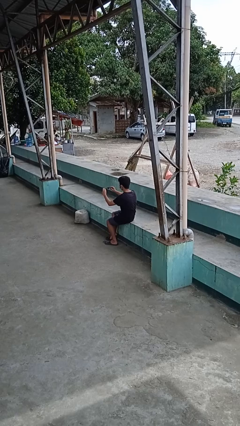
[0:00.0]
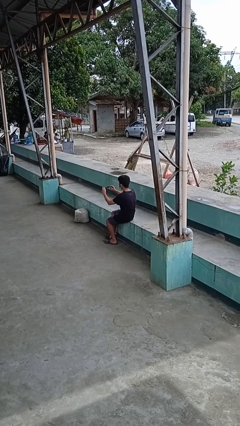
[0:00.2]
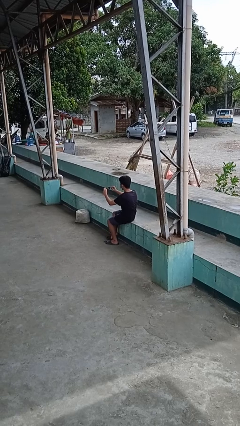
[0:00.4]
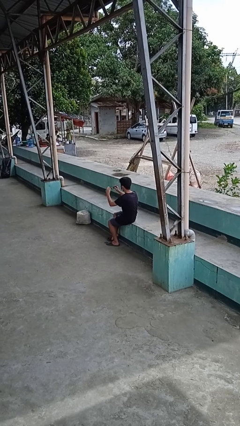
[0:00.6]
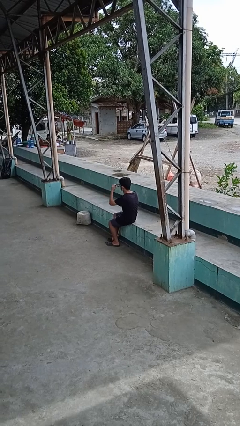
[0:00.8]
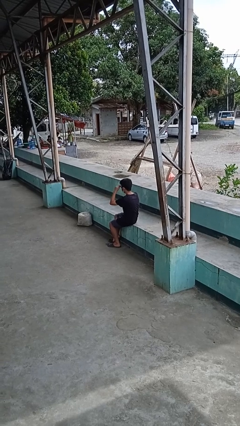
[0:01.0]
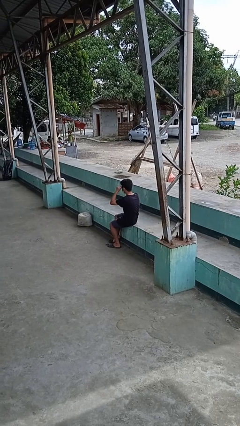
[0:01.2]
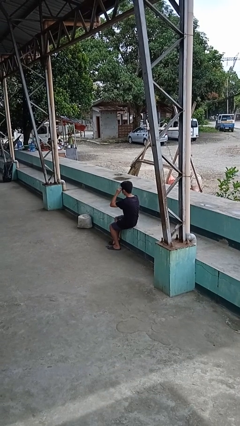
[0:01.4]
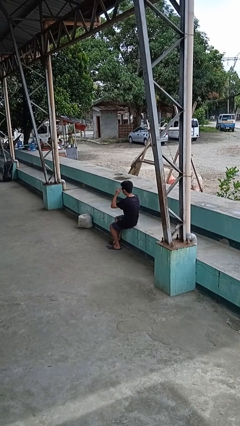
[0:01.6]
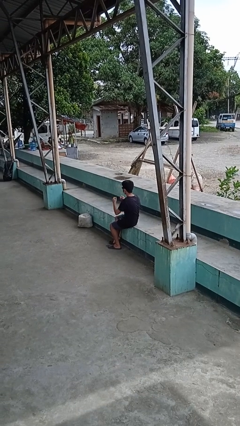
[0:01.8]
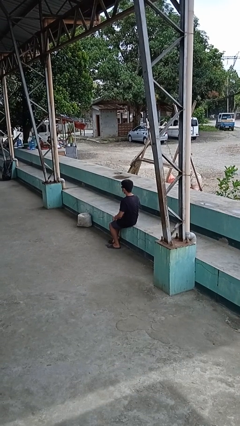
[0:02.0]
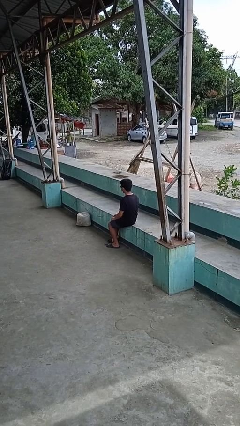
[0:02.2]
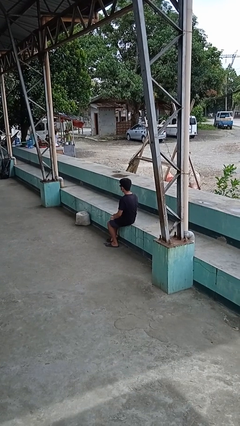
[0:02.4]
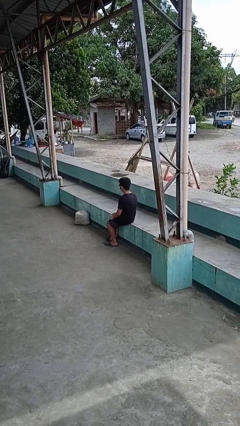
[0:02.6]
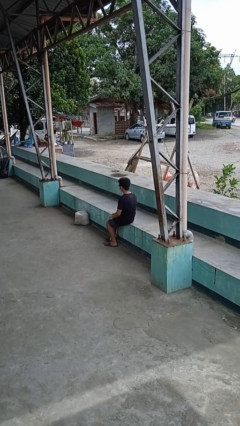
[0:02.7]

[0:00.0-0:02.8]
person puts on sunglasses

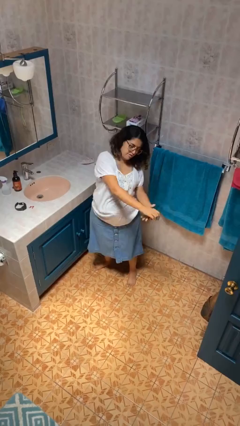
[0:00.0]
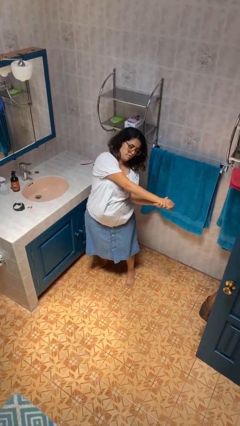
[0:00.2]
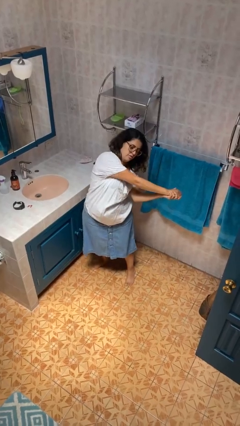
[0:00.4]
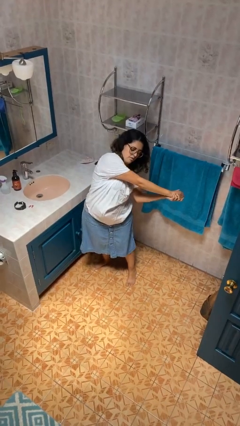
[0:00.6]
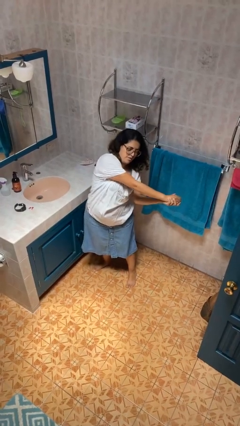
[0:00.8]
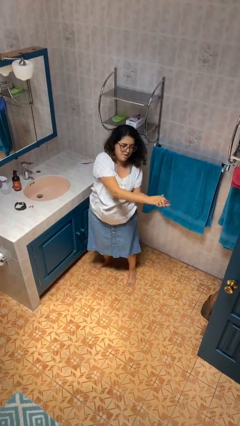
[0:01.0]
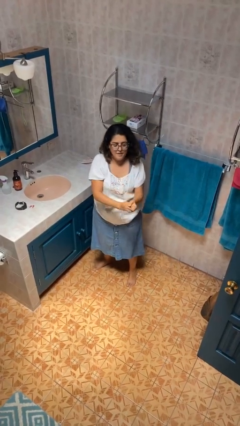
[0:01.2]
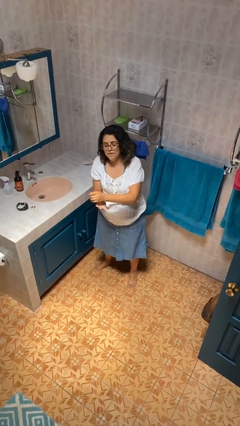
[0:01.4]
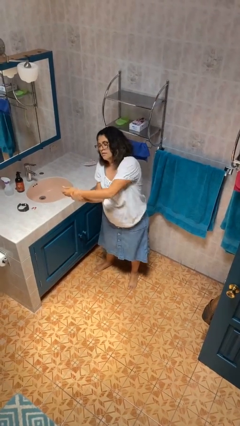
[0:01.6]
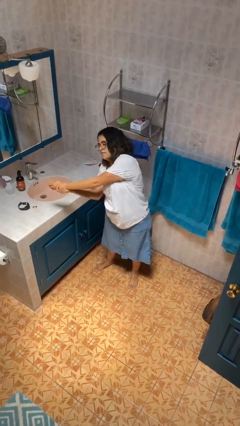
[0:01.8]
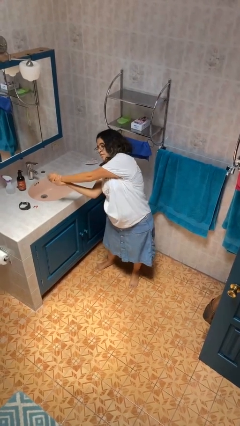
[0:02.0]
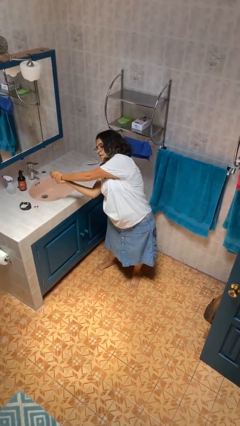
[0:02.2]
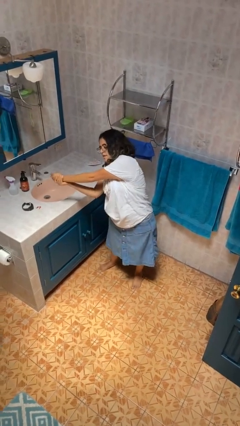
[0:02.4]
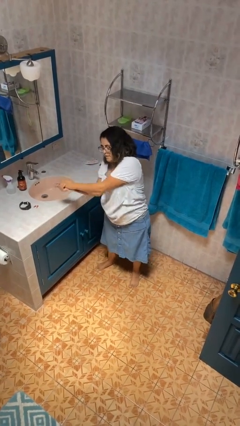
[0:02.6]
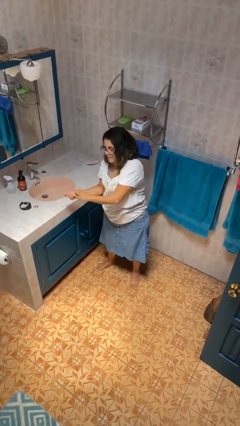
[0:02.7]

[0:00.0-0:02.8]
person stretches arms to side

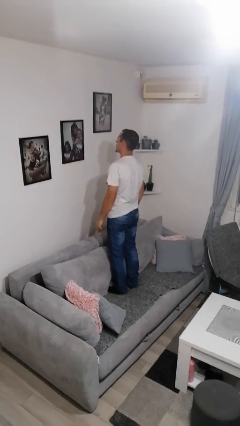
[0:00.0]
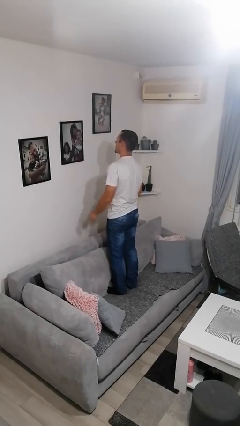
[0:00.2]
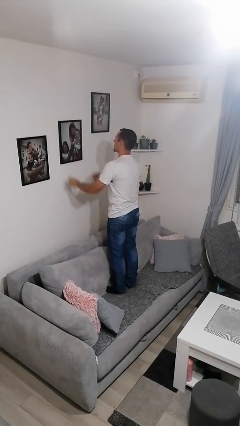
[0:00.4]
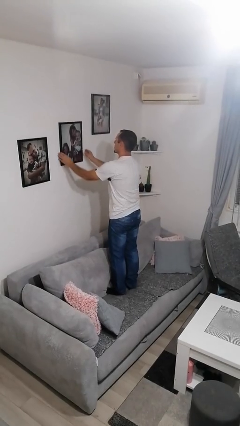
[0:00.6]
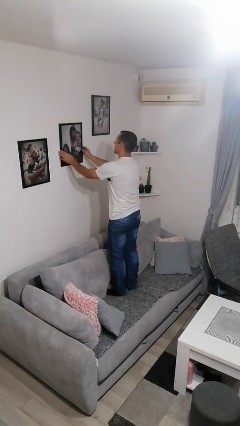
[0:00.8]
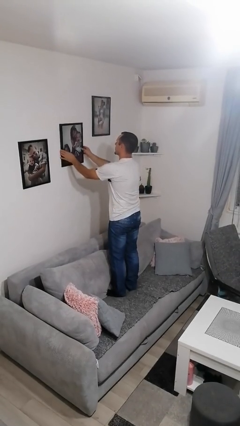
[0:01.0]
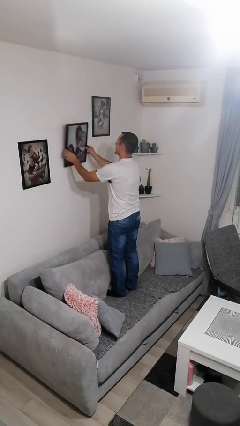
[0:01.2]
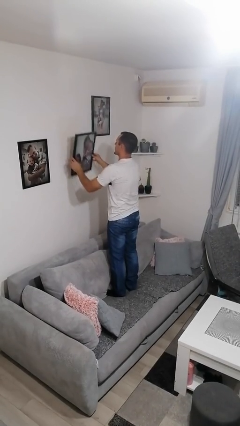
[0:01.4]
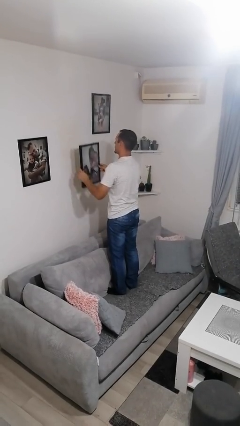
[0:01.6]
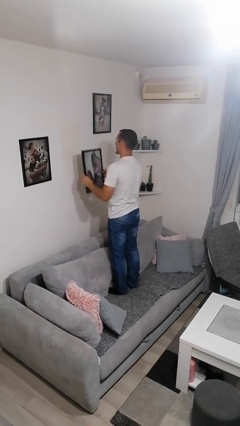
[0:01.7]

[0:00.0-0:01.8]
person takes down picture frame

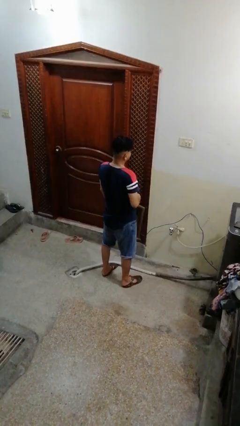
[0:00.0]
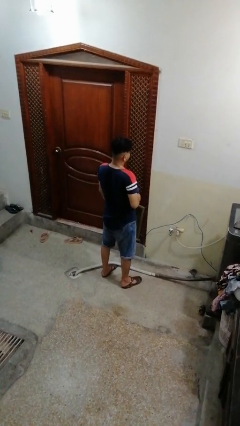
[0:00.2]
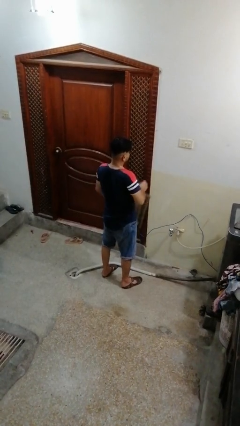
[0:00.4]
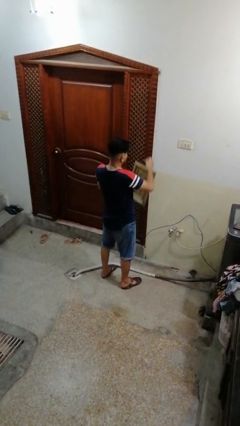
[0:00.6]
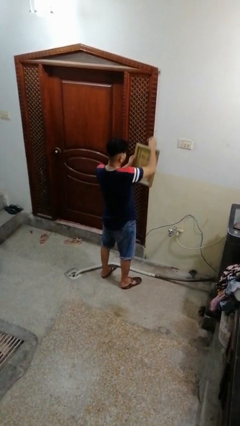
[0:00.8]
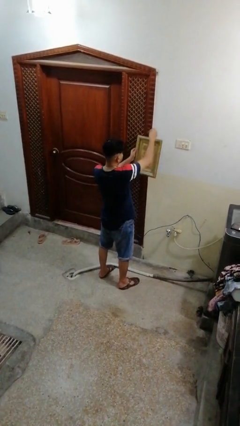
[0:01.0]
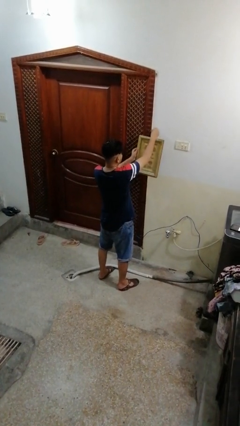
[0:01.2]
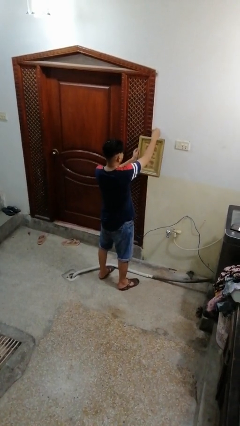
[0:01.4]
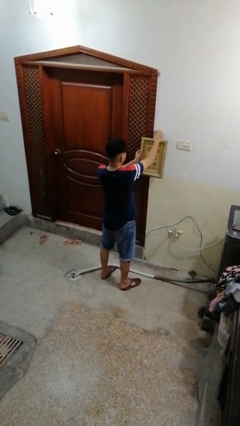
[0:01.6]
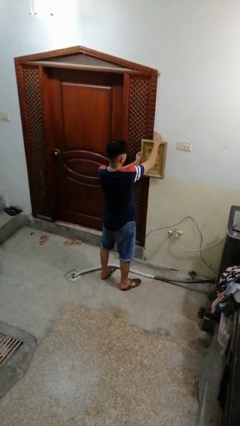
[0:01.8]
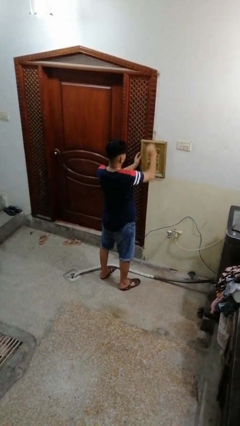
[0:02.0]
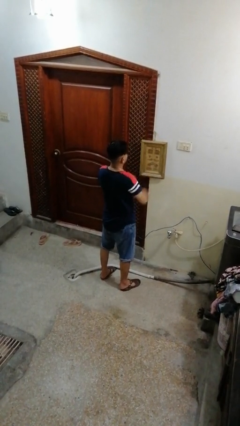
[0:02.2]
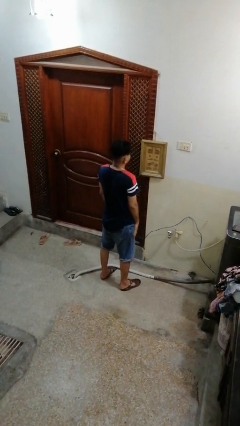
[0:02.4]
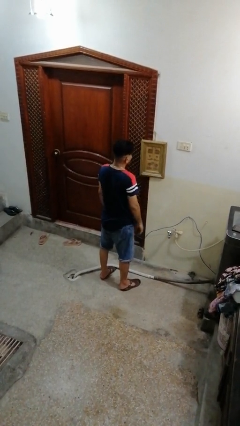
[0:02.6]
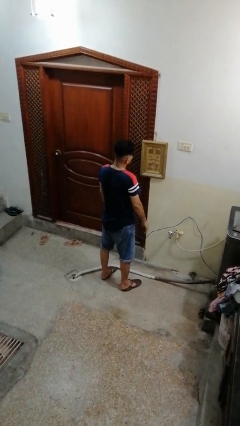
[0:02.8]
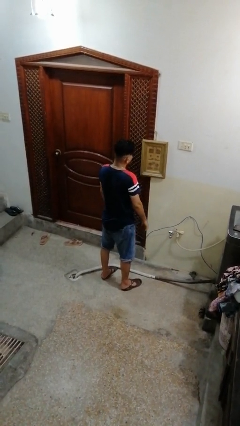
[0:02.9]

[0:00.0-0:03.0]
person puts up picture frame

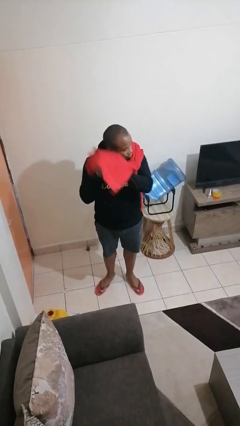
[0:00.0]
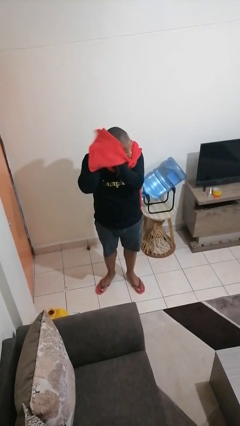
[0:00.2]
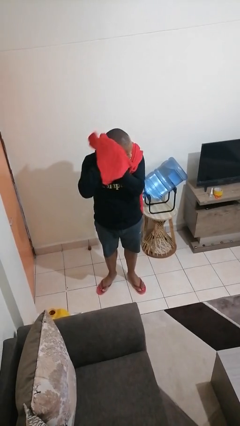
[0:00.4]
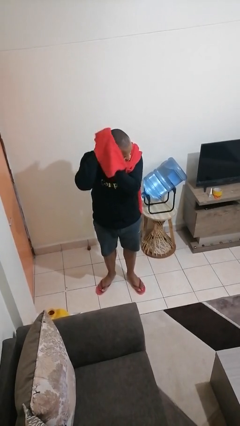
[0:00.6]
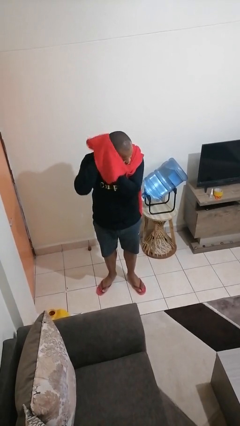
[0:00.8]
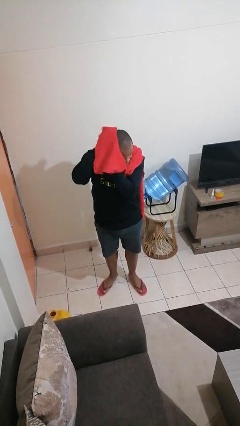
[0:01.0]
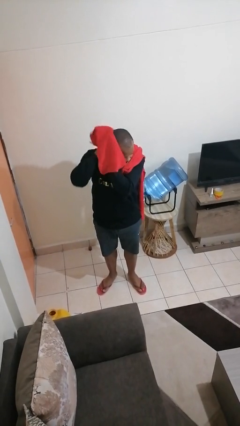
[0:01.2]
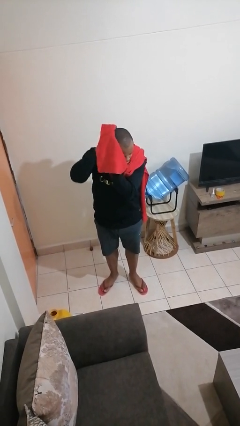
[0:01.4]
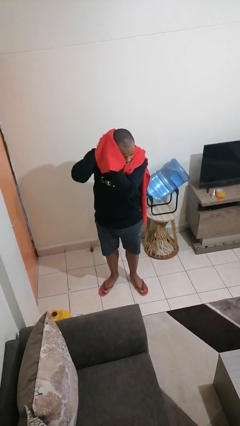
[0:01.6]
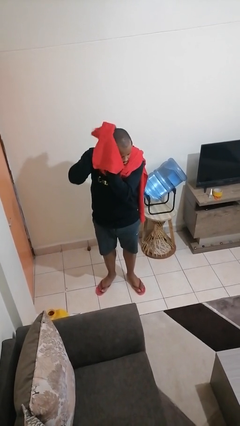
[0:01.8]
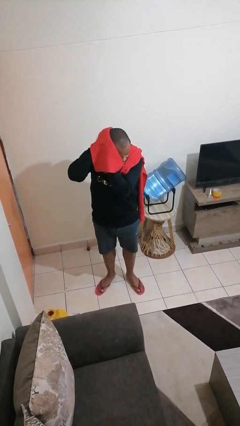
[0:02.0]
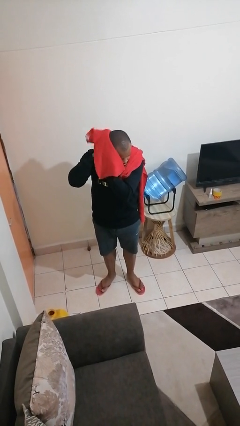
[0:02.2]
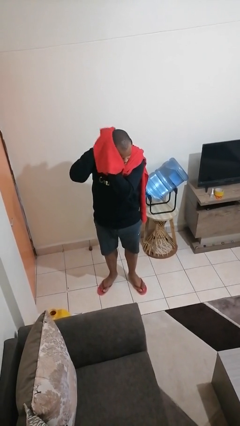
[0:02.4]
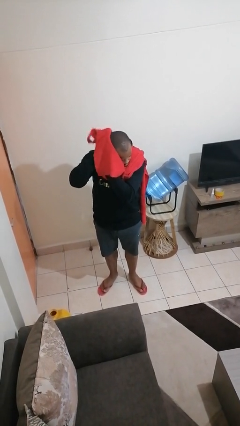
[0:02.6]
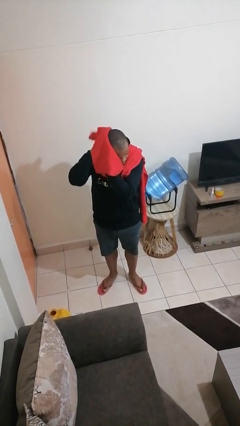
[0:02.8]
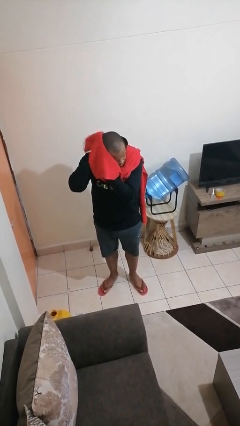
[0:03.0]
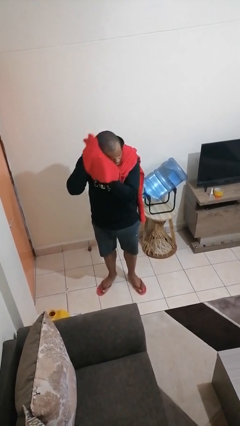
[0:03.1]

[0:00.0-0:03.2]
person dries hair with towel

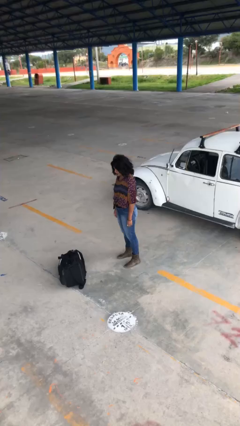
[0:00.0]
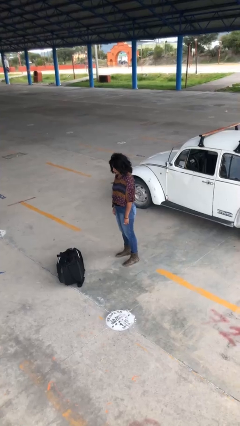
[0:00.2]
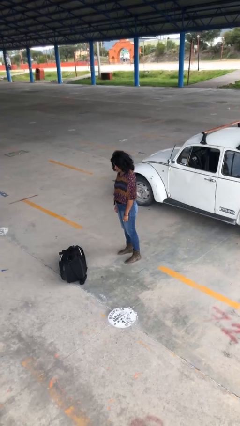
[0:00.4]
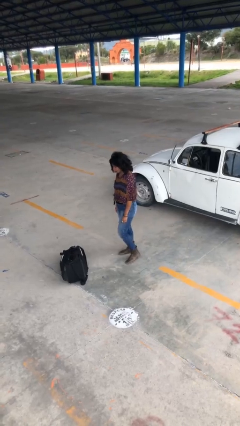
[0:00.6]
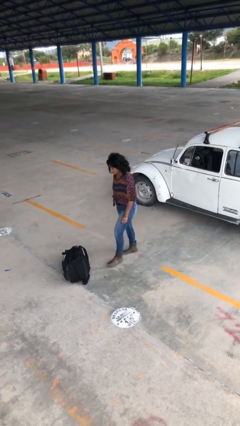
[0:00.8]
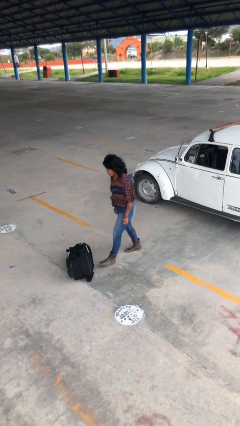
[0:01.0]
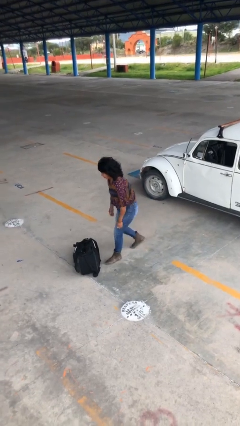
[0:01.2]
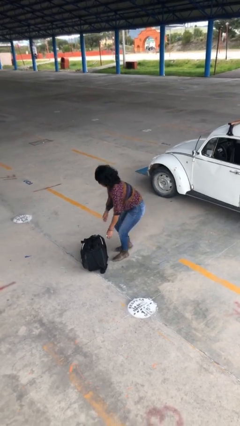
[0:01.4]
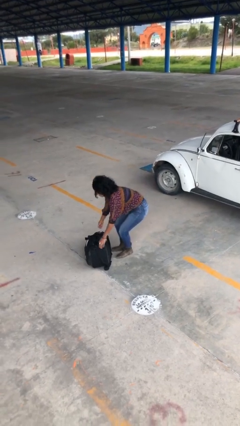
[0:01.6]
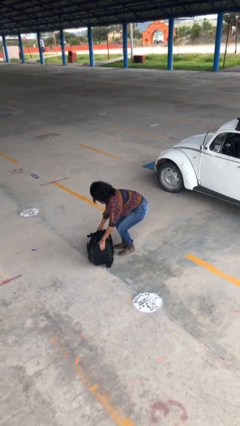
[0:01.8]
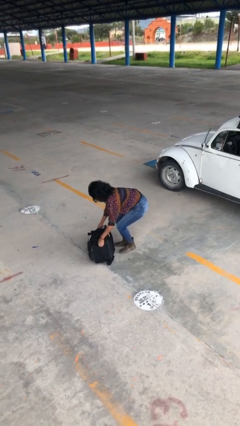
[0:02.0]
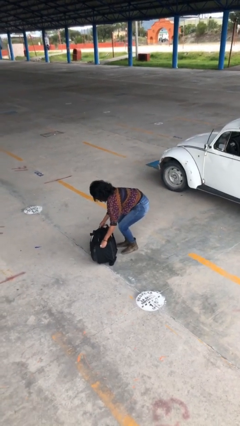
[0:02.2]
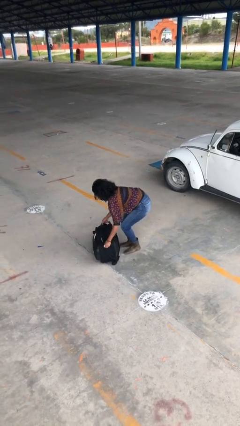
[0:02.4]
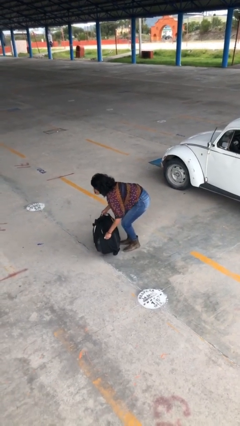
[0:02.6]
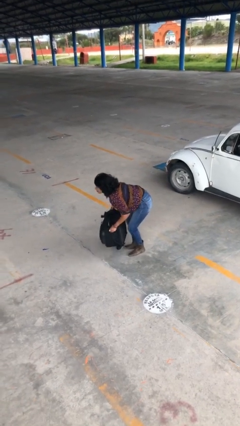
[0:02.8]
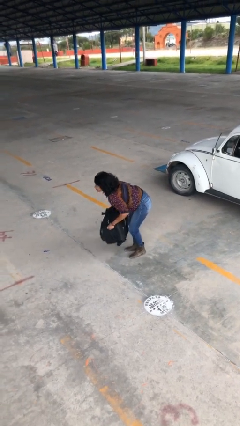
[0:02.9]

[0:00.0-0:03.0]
person picks up object from floor

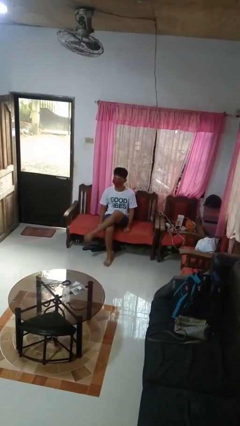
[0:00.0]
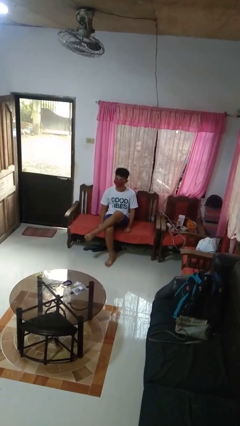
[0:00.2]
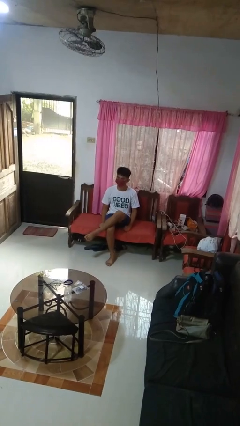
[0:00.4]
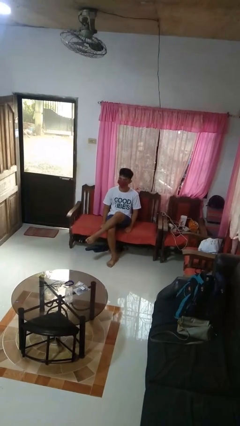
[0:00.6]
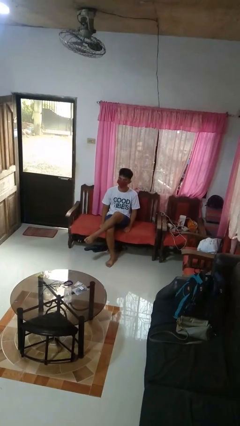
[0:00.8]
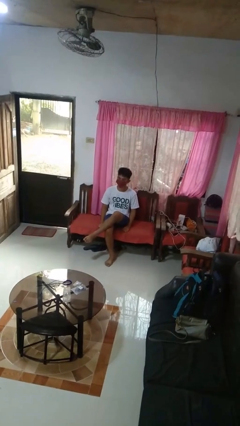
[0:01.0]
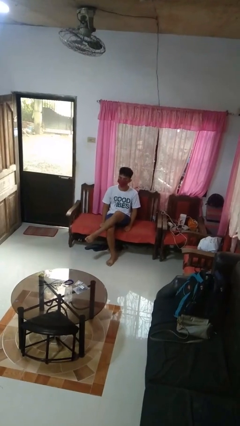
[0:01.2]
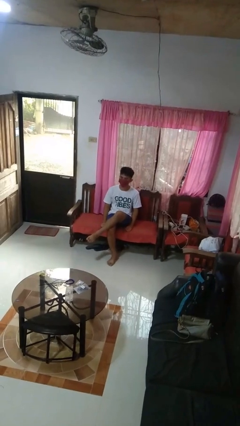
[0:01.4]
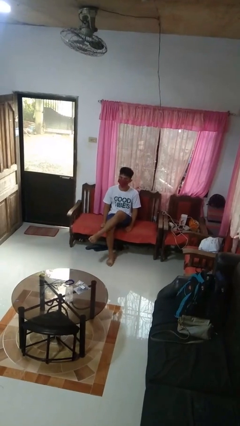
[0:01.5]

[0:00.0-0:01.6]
person crosses legs
